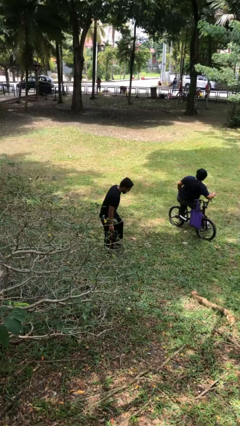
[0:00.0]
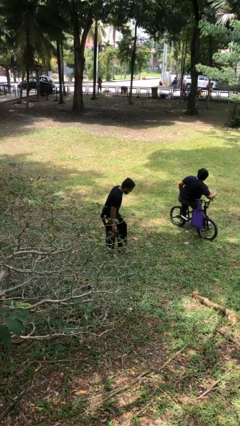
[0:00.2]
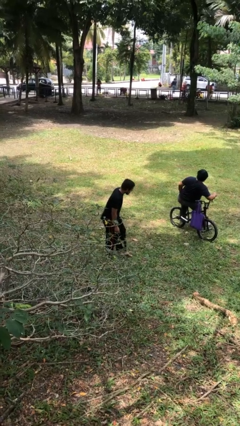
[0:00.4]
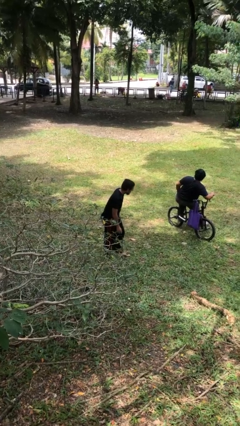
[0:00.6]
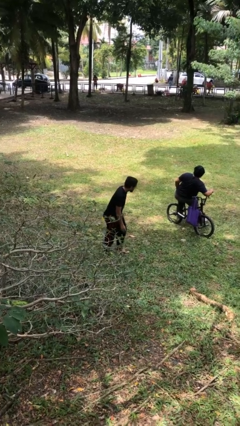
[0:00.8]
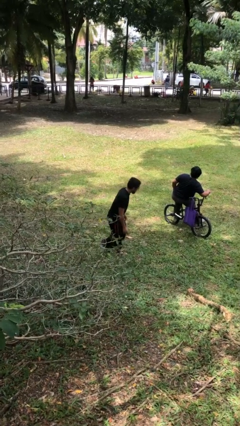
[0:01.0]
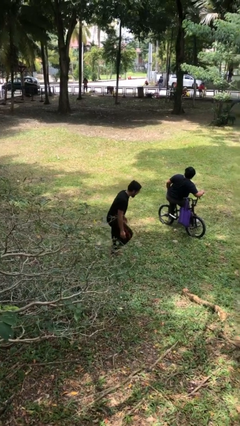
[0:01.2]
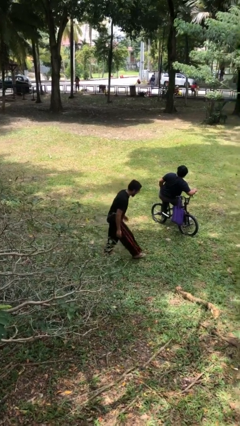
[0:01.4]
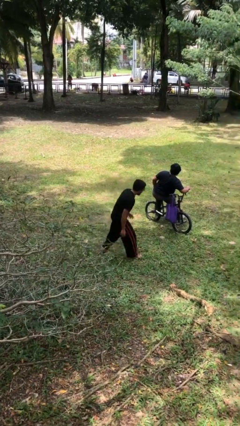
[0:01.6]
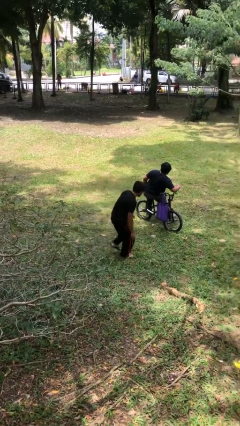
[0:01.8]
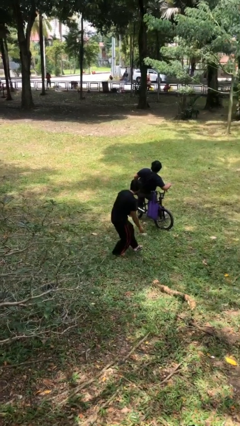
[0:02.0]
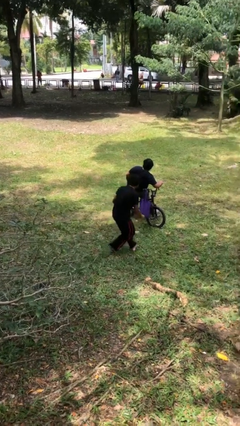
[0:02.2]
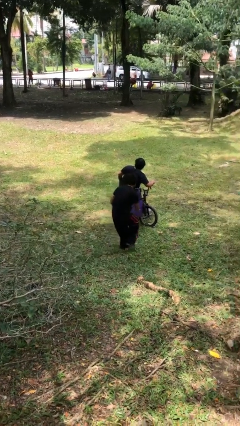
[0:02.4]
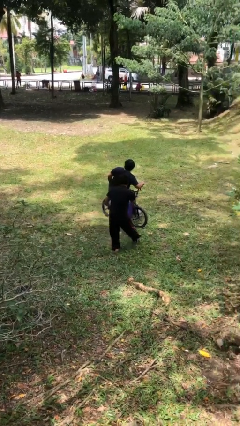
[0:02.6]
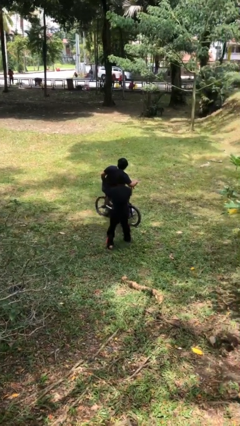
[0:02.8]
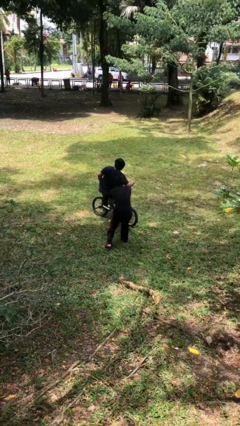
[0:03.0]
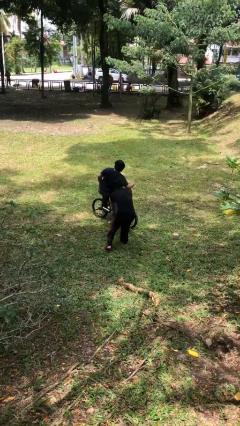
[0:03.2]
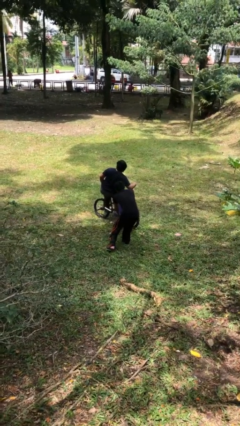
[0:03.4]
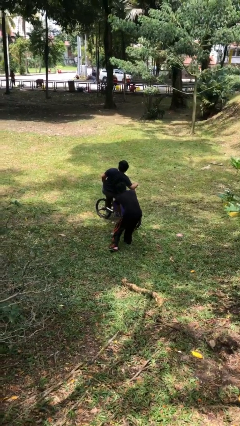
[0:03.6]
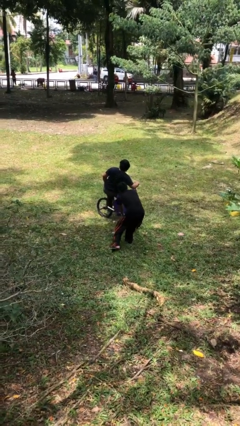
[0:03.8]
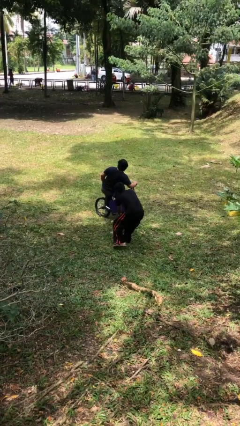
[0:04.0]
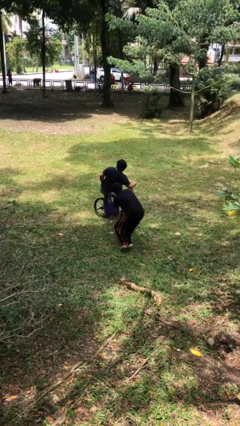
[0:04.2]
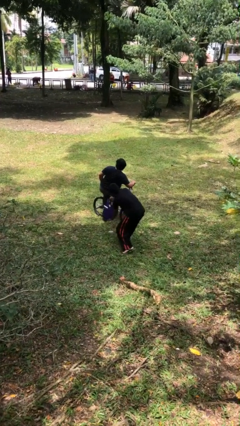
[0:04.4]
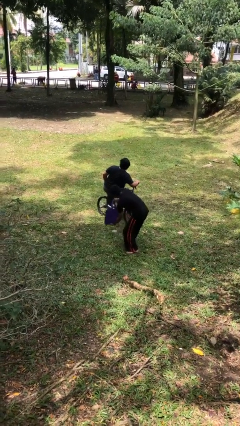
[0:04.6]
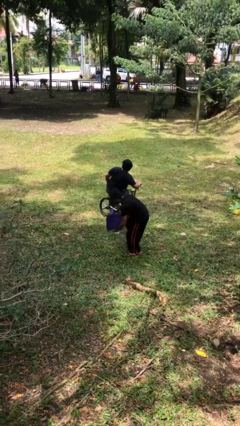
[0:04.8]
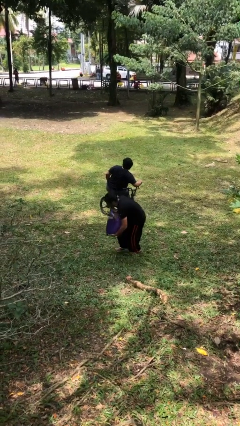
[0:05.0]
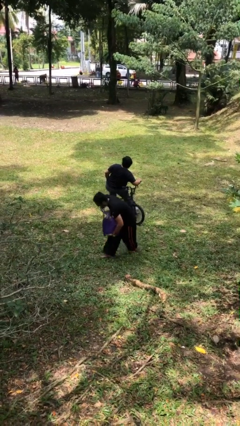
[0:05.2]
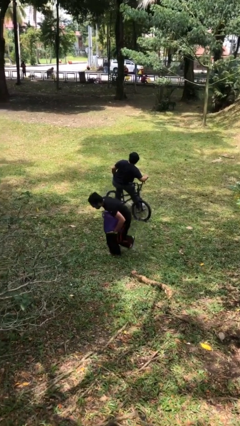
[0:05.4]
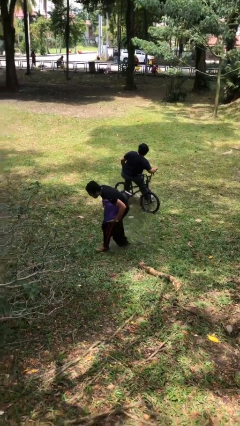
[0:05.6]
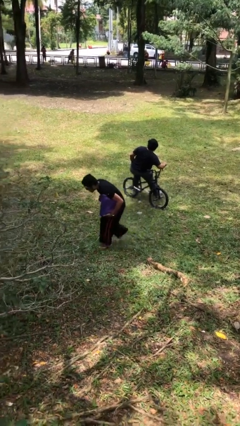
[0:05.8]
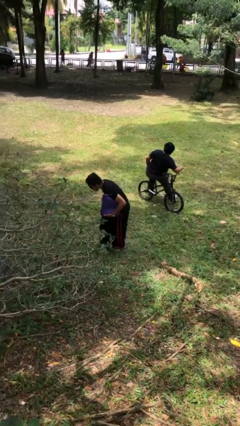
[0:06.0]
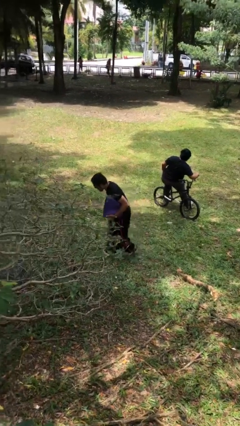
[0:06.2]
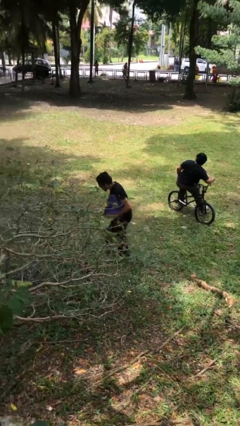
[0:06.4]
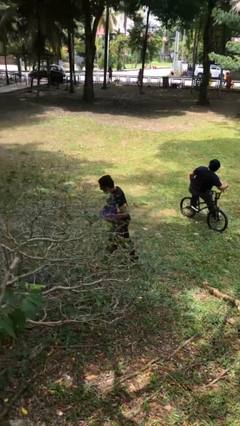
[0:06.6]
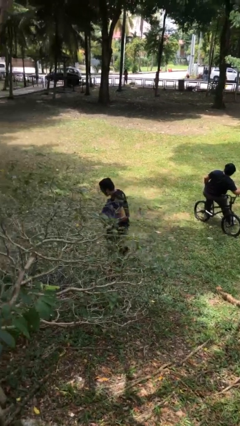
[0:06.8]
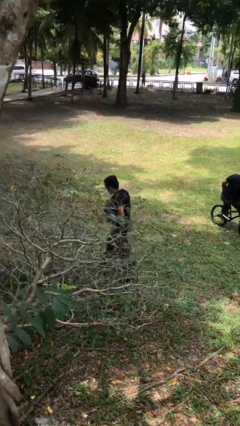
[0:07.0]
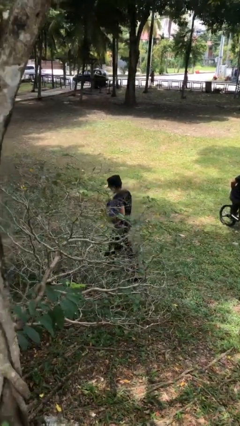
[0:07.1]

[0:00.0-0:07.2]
person steals object from person

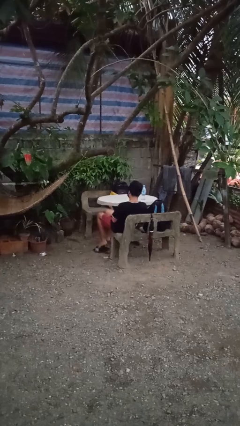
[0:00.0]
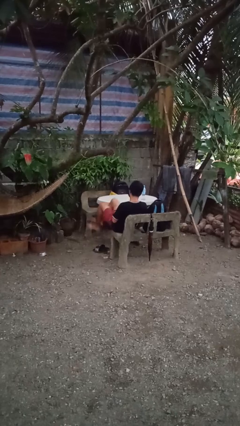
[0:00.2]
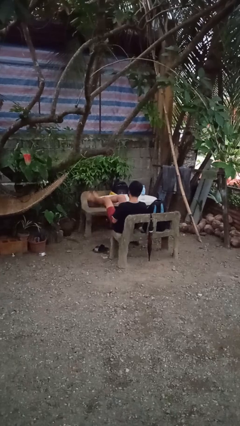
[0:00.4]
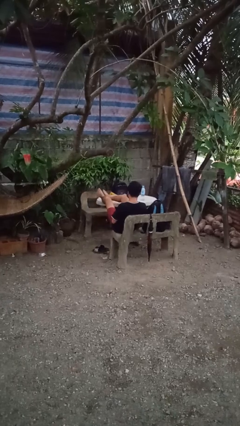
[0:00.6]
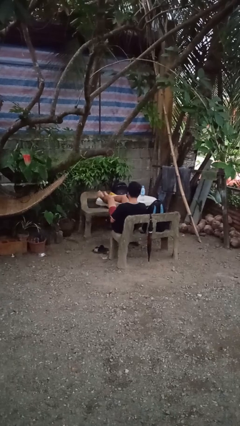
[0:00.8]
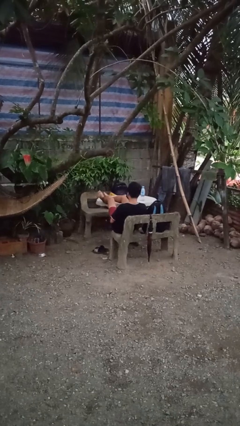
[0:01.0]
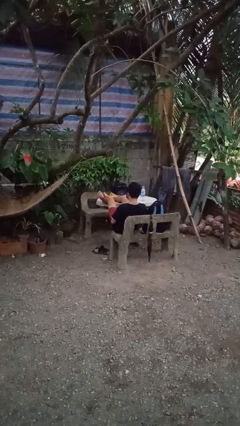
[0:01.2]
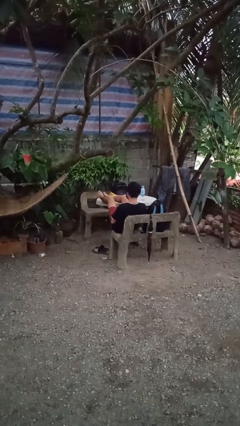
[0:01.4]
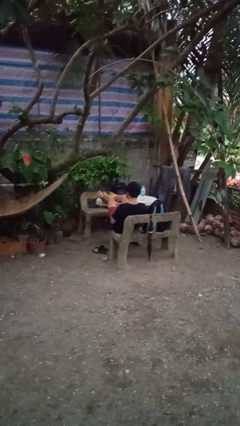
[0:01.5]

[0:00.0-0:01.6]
person puts feet up

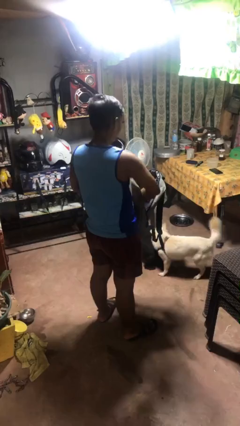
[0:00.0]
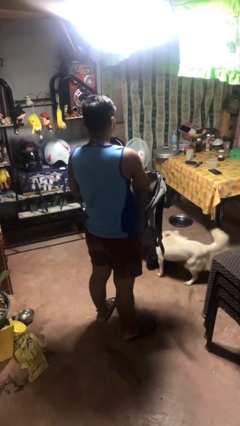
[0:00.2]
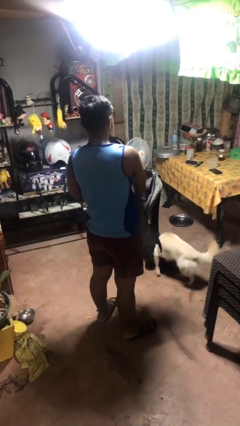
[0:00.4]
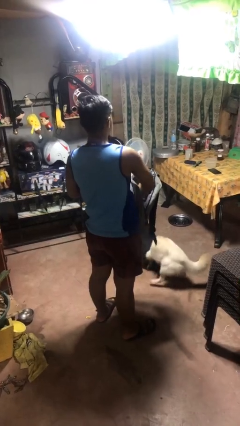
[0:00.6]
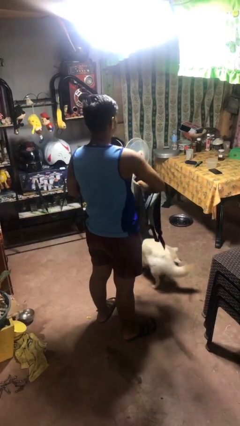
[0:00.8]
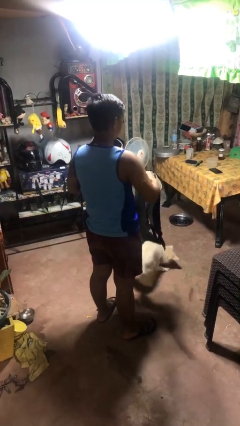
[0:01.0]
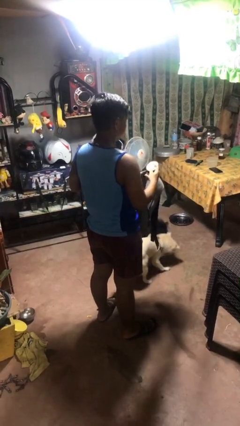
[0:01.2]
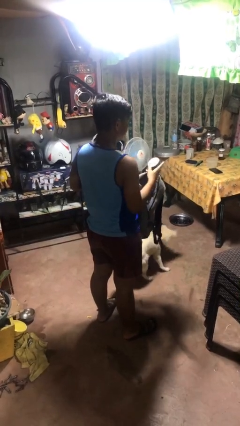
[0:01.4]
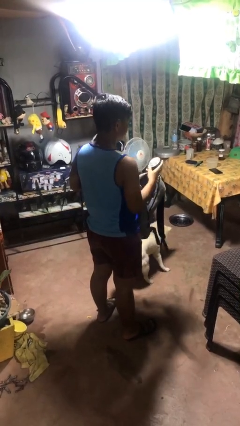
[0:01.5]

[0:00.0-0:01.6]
person takes object from bag

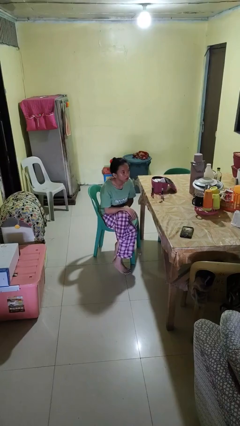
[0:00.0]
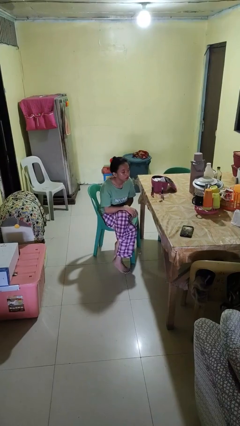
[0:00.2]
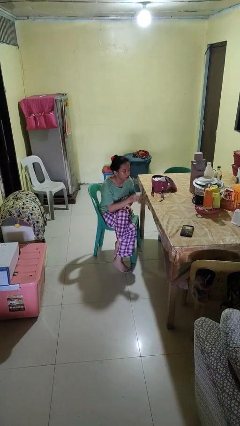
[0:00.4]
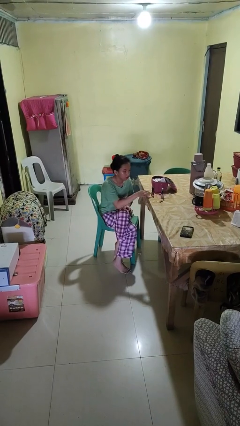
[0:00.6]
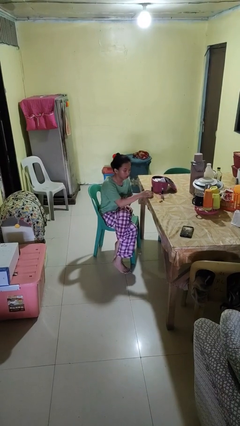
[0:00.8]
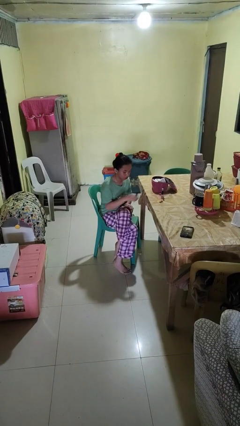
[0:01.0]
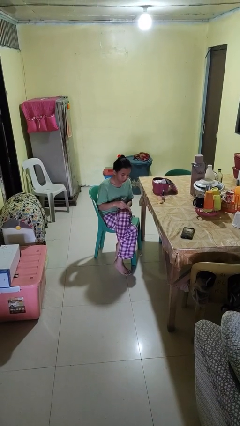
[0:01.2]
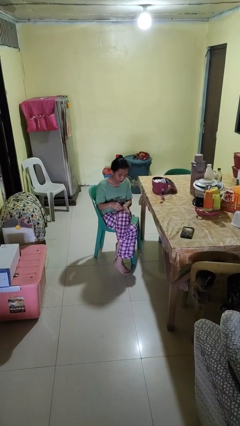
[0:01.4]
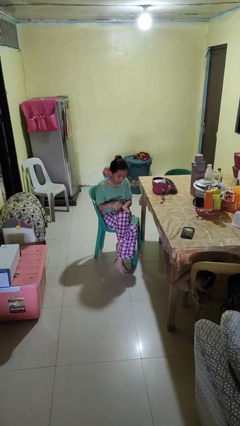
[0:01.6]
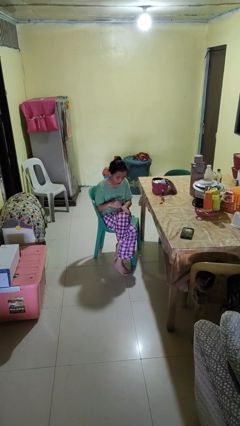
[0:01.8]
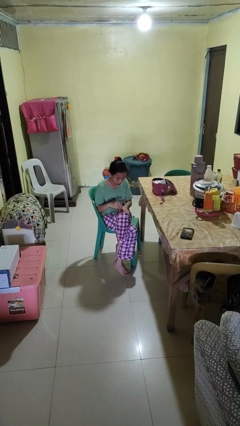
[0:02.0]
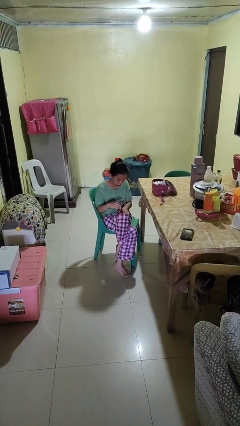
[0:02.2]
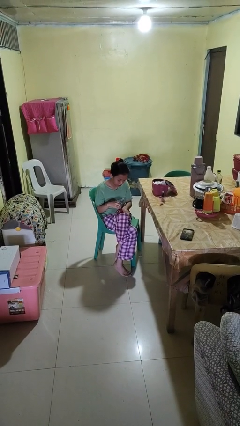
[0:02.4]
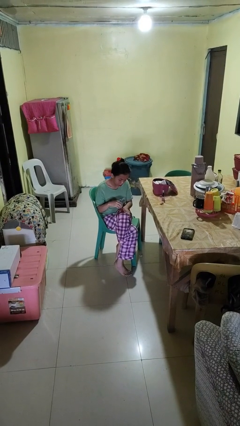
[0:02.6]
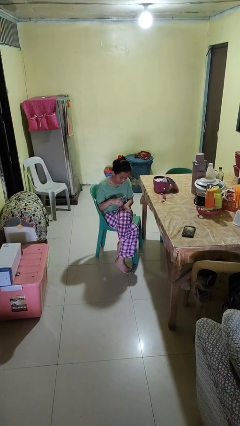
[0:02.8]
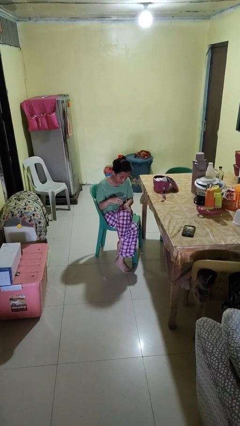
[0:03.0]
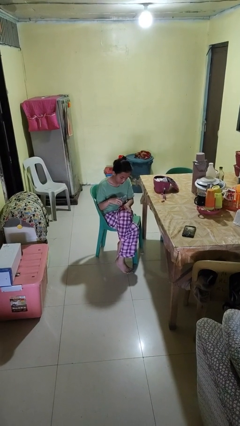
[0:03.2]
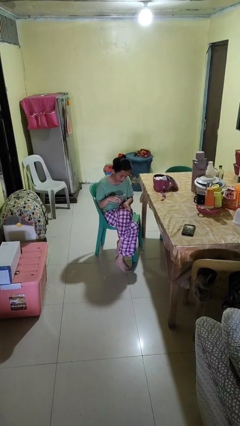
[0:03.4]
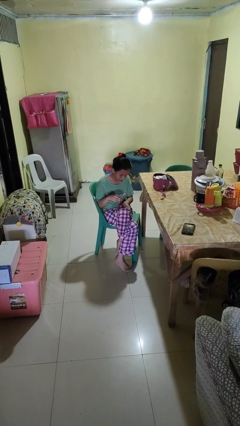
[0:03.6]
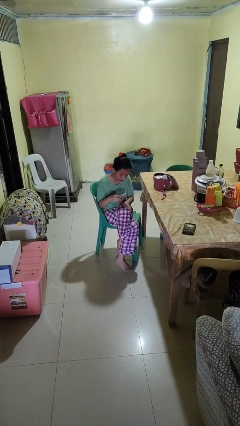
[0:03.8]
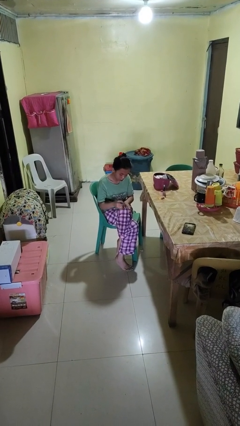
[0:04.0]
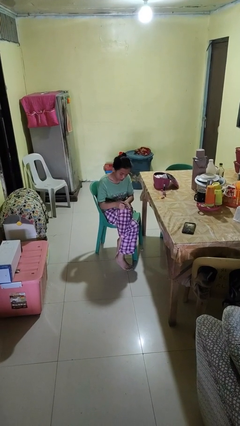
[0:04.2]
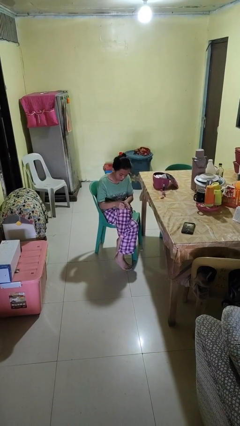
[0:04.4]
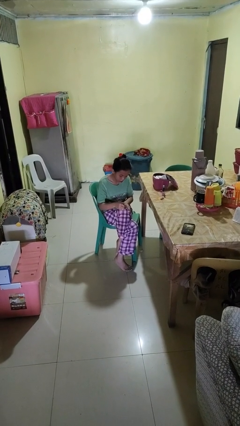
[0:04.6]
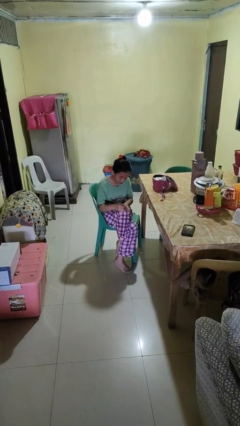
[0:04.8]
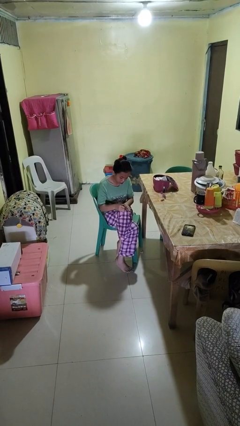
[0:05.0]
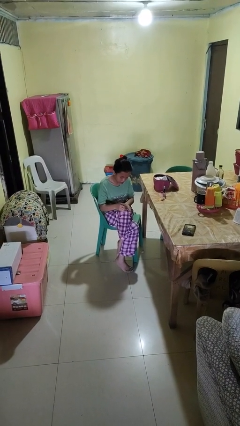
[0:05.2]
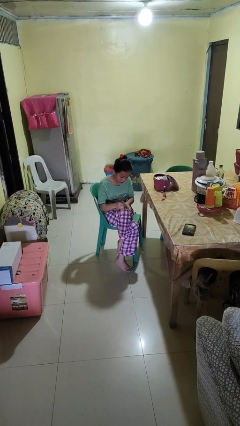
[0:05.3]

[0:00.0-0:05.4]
person paints fingernails

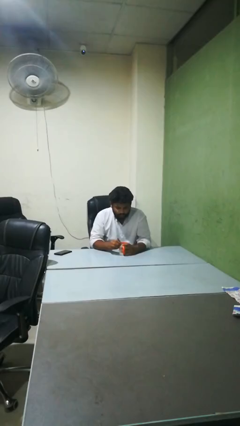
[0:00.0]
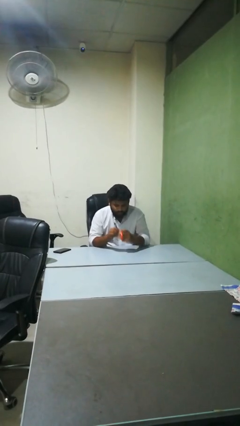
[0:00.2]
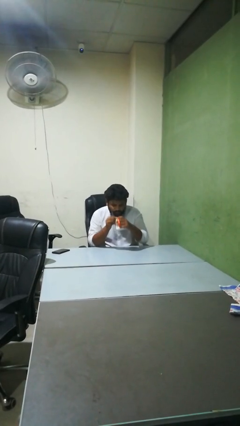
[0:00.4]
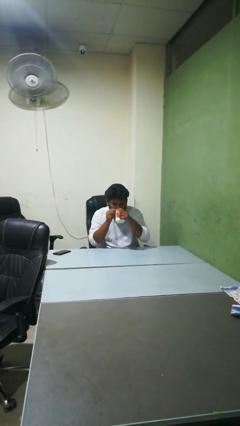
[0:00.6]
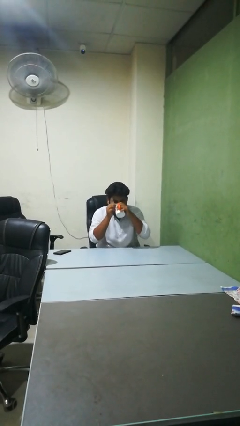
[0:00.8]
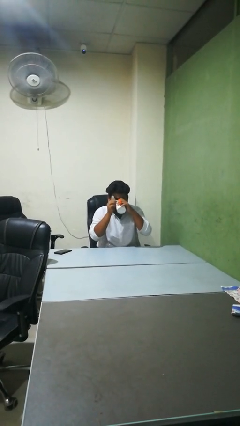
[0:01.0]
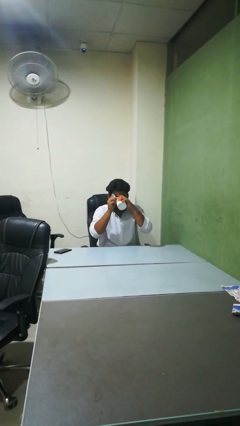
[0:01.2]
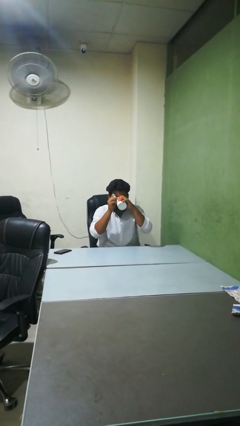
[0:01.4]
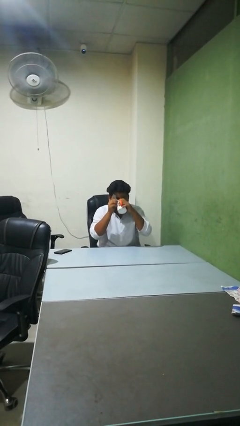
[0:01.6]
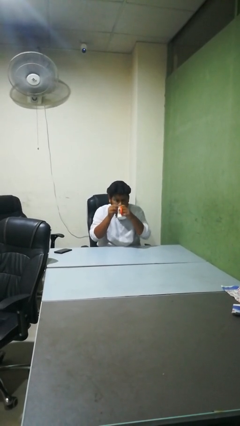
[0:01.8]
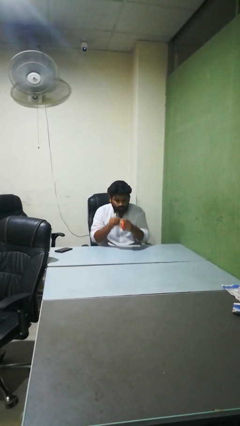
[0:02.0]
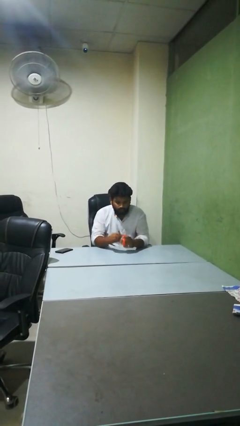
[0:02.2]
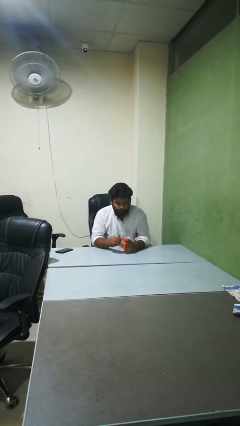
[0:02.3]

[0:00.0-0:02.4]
person drinks from mug
